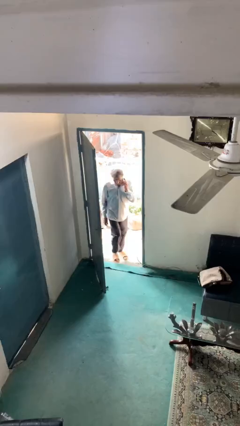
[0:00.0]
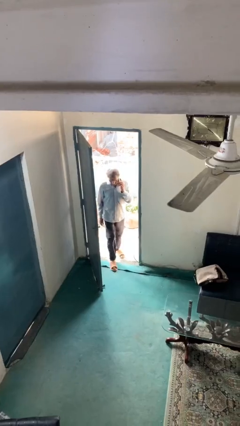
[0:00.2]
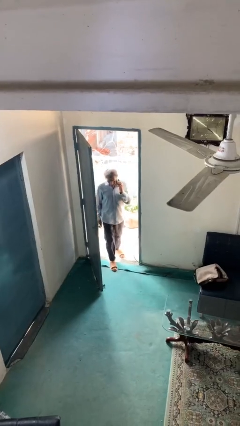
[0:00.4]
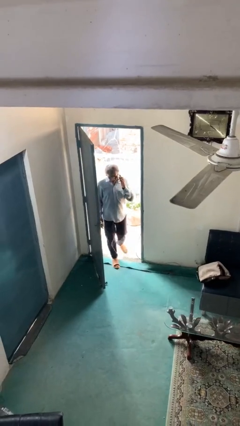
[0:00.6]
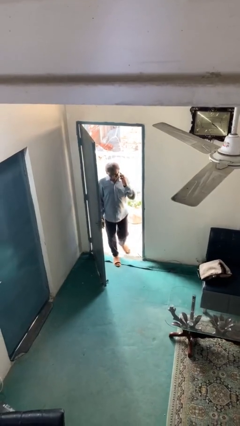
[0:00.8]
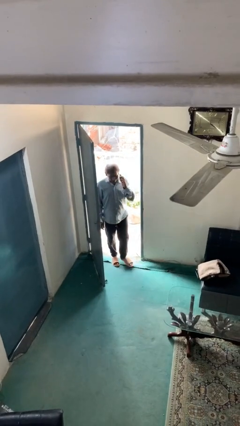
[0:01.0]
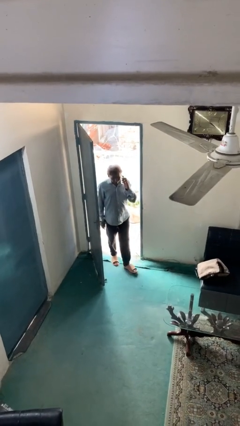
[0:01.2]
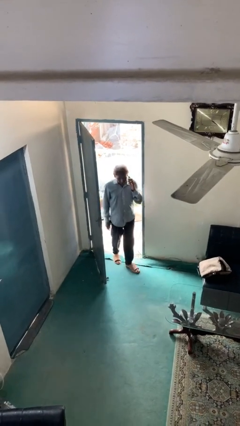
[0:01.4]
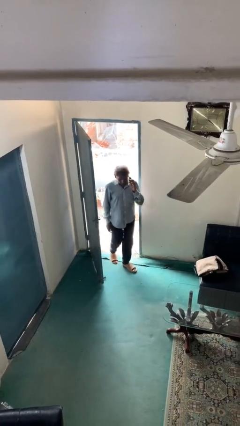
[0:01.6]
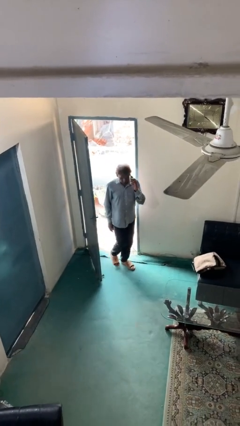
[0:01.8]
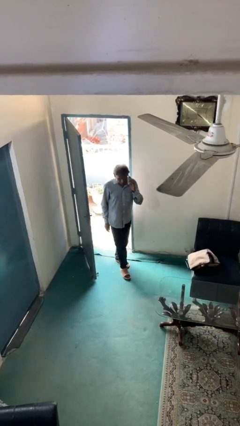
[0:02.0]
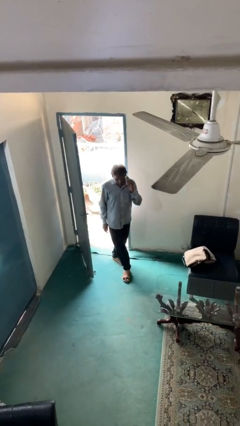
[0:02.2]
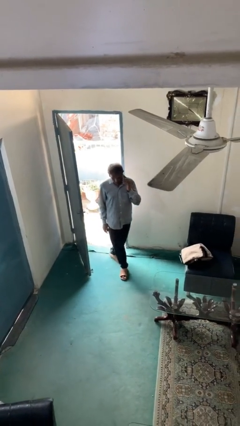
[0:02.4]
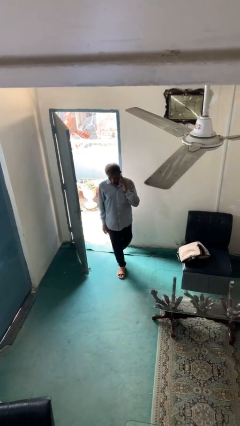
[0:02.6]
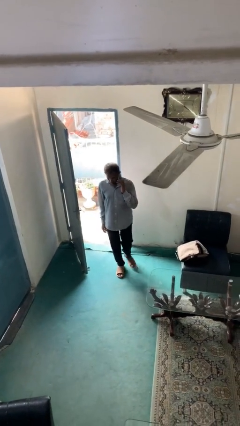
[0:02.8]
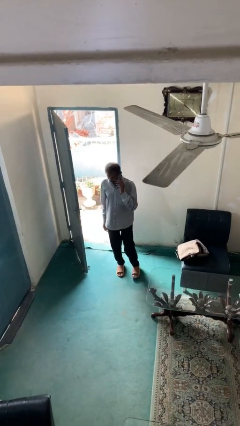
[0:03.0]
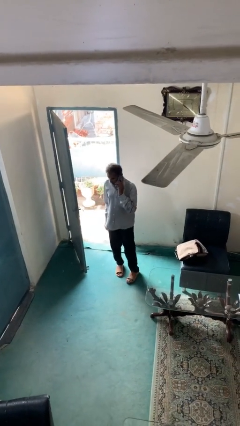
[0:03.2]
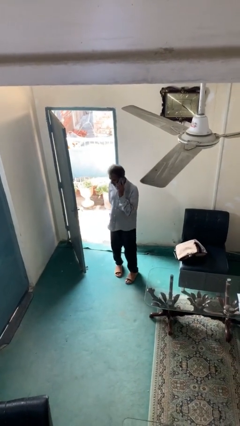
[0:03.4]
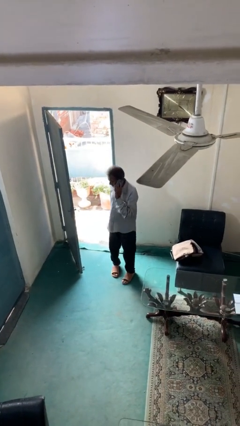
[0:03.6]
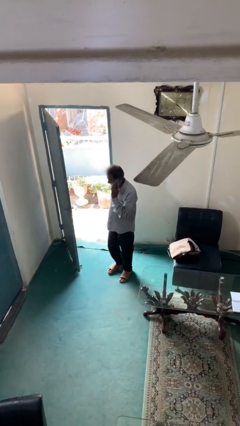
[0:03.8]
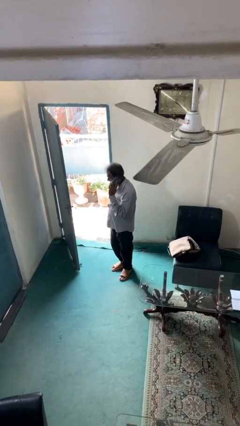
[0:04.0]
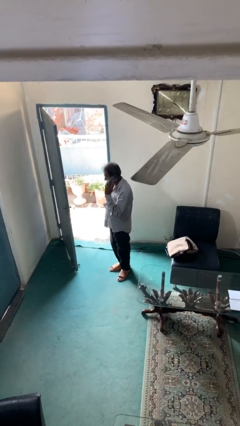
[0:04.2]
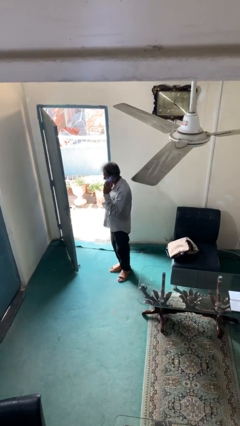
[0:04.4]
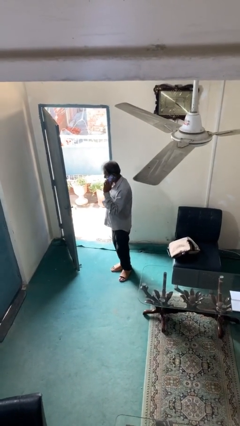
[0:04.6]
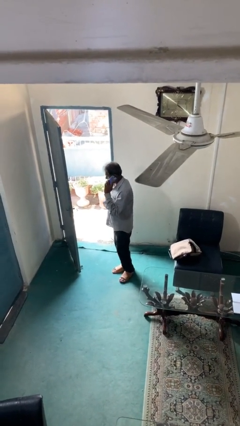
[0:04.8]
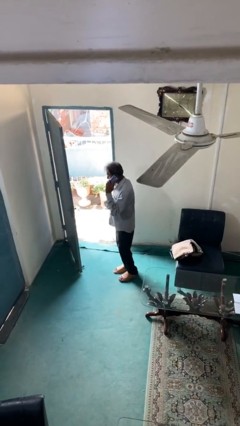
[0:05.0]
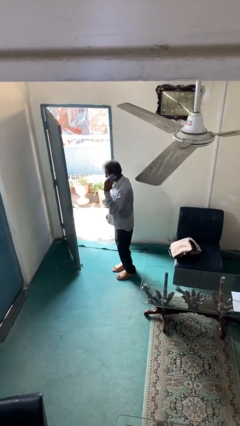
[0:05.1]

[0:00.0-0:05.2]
person enters scene through structure

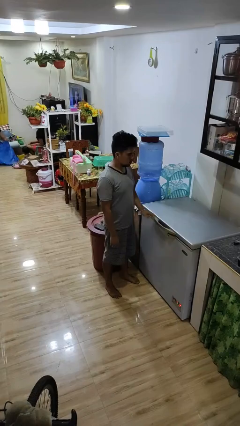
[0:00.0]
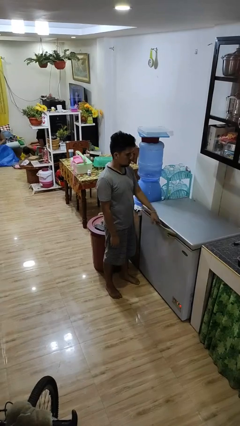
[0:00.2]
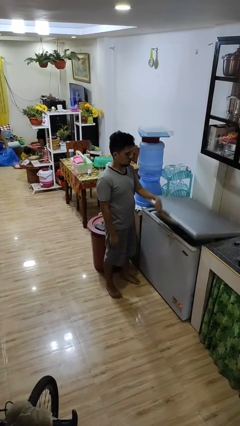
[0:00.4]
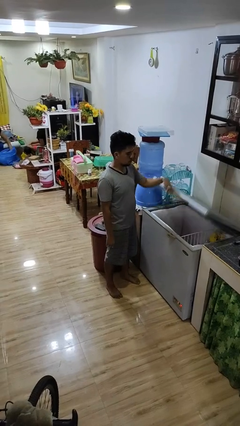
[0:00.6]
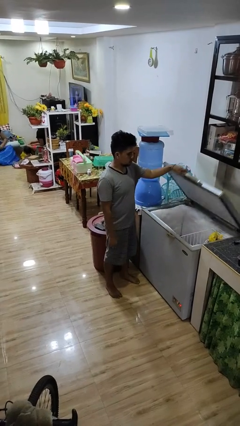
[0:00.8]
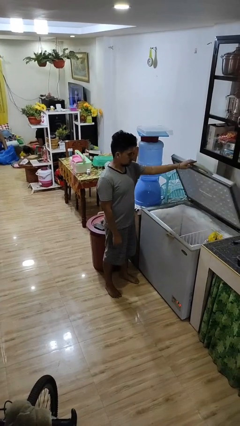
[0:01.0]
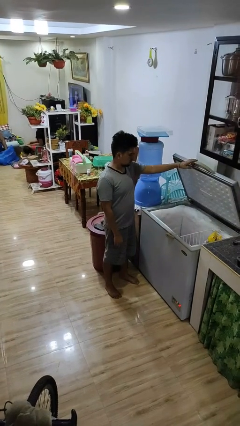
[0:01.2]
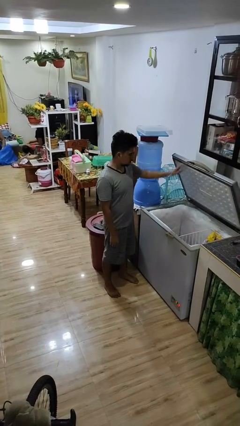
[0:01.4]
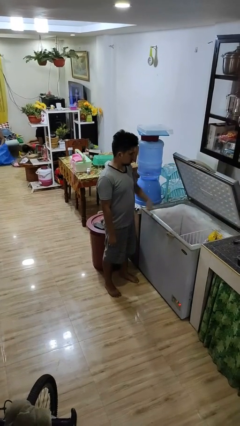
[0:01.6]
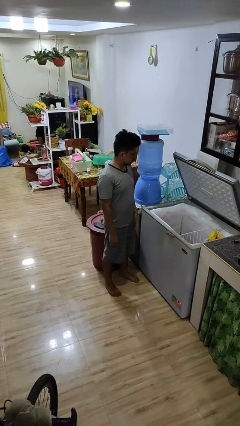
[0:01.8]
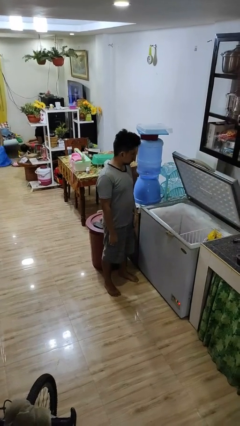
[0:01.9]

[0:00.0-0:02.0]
person opens refrigerator

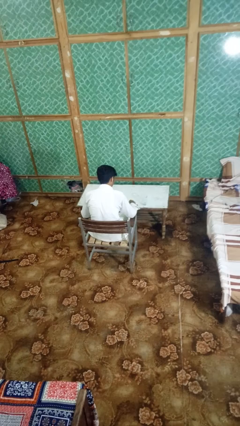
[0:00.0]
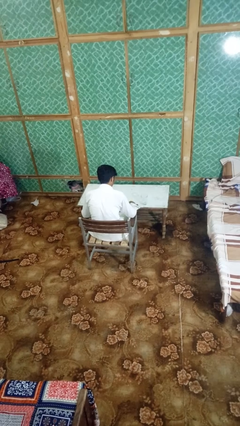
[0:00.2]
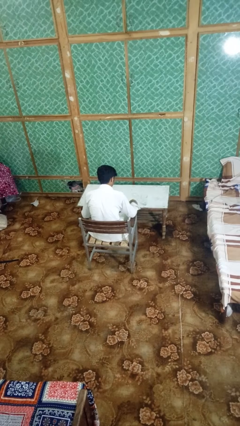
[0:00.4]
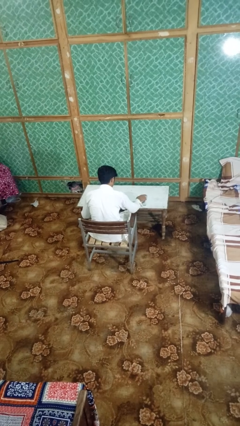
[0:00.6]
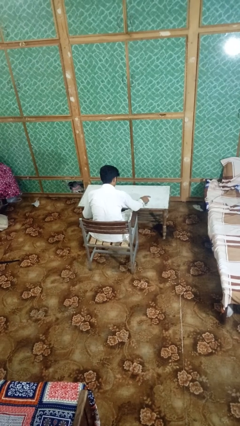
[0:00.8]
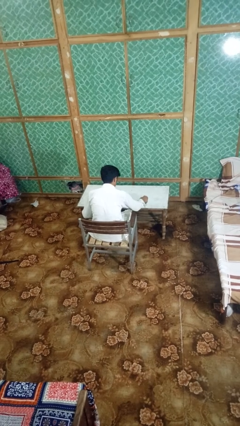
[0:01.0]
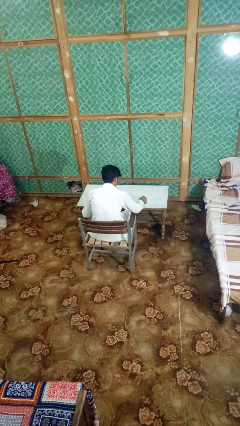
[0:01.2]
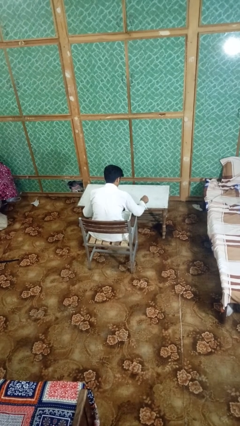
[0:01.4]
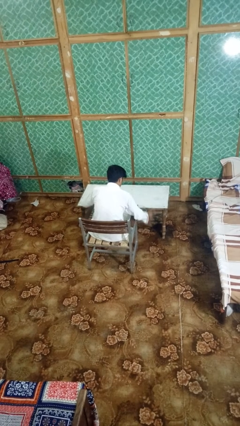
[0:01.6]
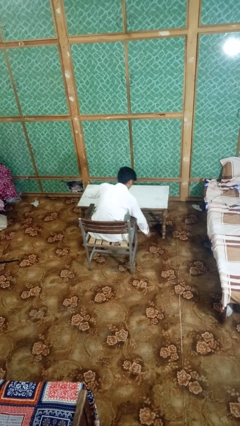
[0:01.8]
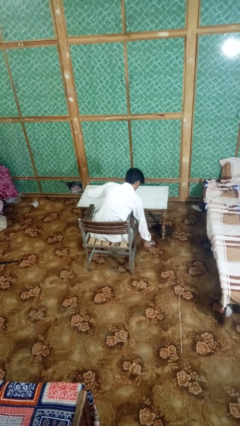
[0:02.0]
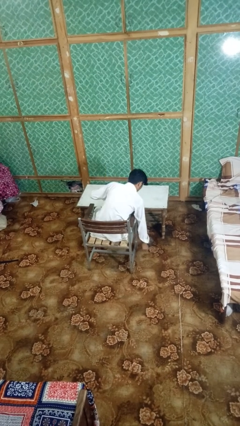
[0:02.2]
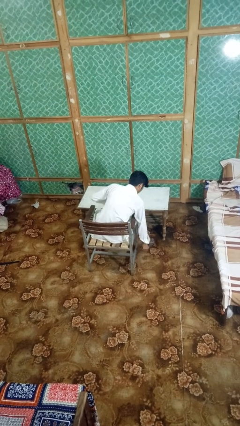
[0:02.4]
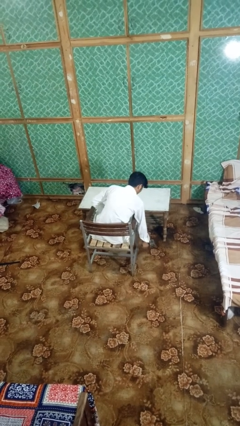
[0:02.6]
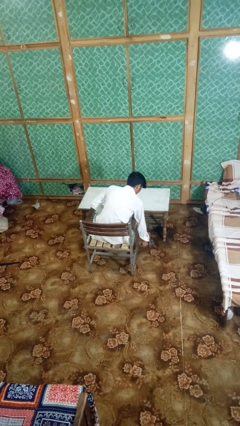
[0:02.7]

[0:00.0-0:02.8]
person knocks over glass

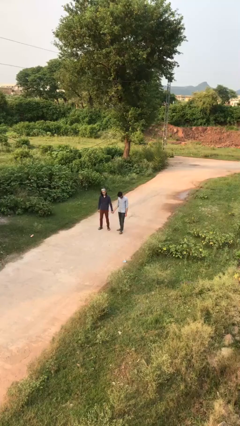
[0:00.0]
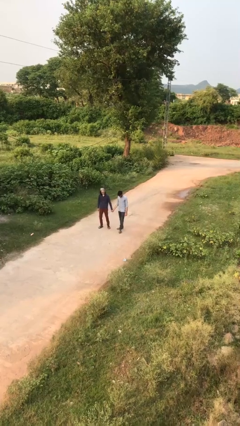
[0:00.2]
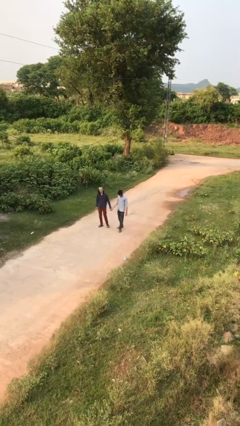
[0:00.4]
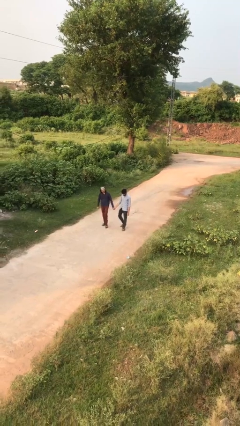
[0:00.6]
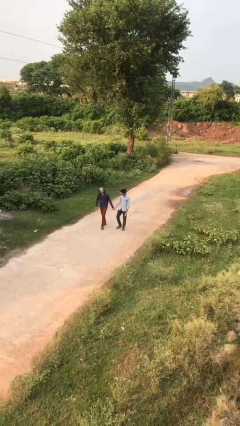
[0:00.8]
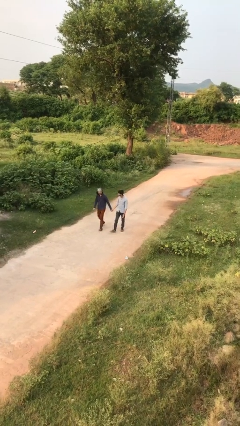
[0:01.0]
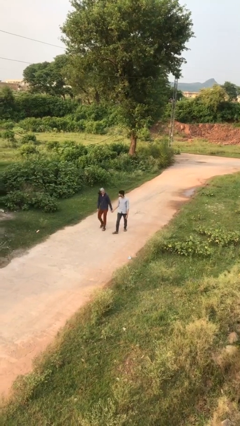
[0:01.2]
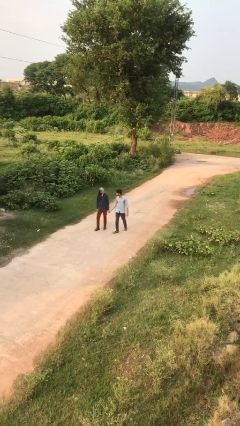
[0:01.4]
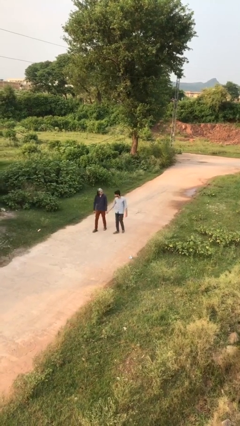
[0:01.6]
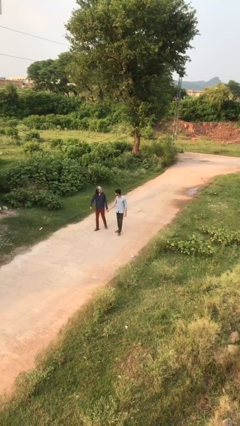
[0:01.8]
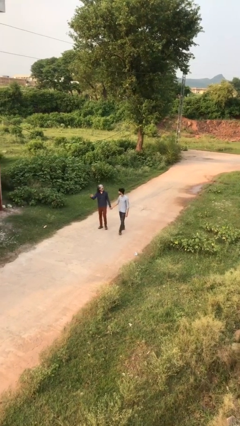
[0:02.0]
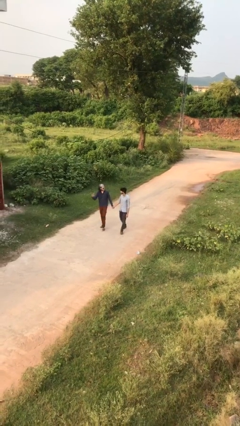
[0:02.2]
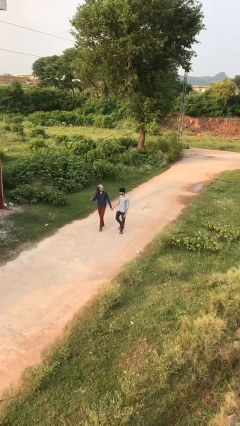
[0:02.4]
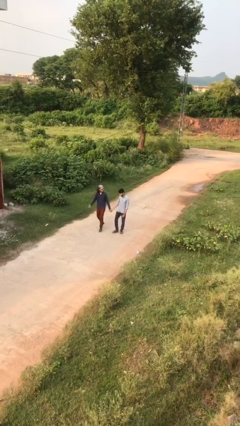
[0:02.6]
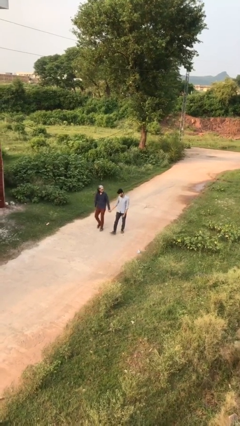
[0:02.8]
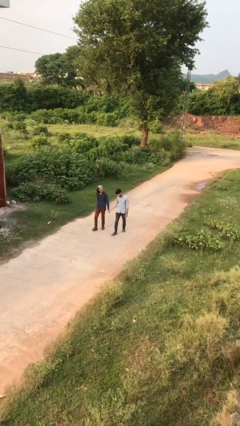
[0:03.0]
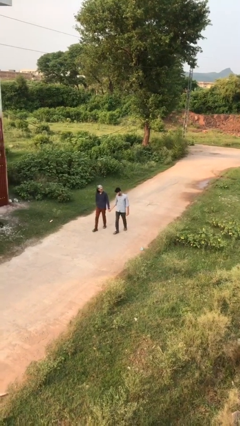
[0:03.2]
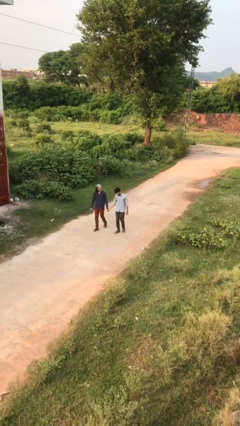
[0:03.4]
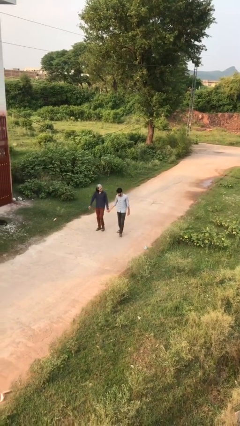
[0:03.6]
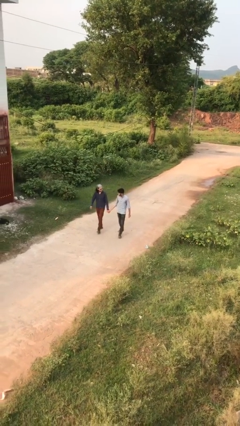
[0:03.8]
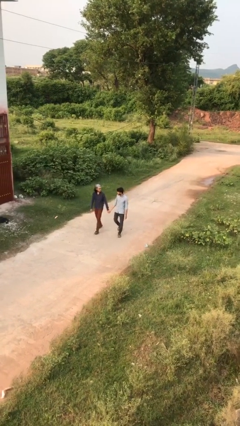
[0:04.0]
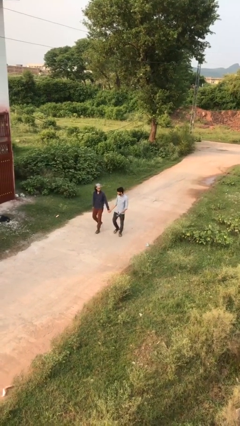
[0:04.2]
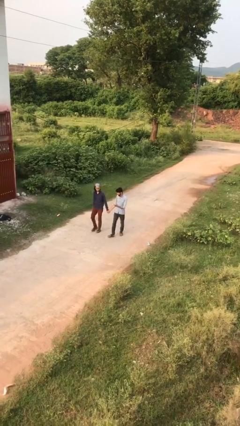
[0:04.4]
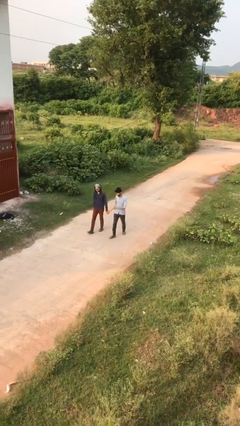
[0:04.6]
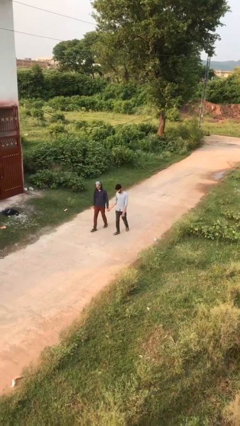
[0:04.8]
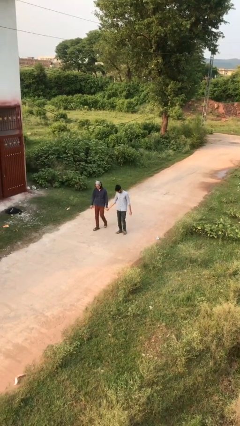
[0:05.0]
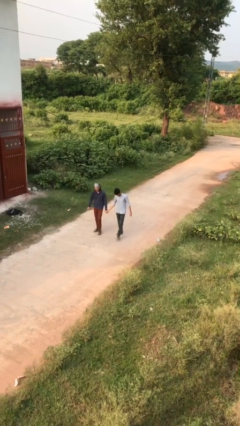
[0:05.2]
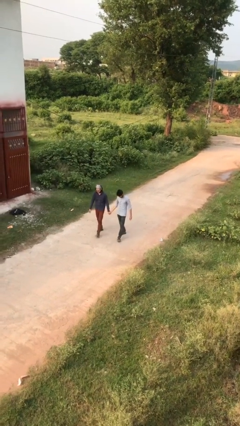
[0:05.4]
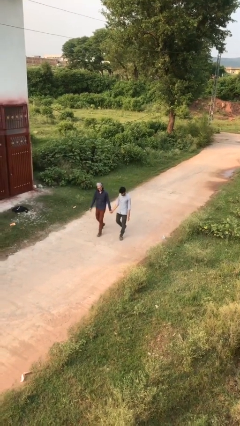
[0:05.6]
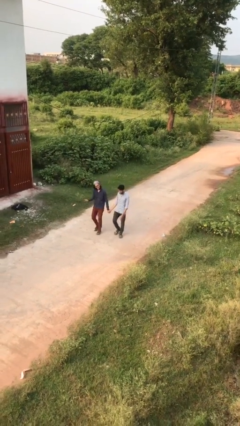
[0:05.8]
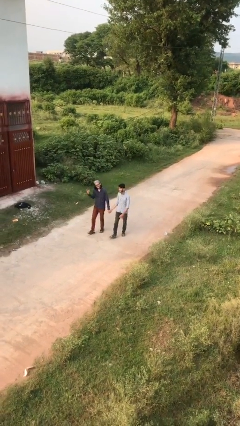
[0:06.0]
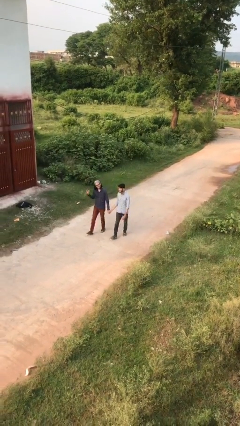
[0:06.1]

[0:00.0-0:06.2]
person holds hand

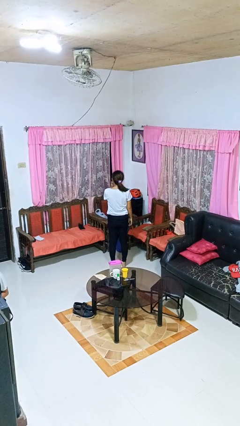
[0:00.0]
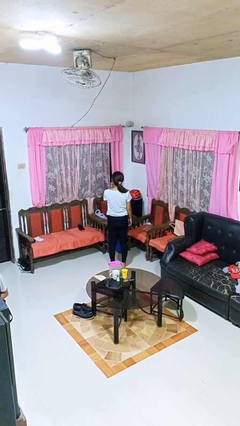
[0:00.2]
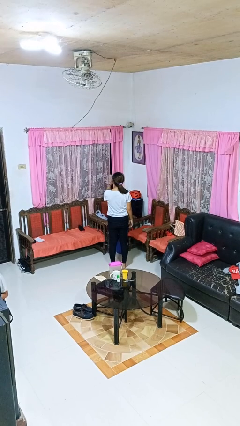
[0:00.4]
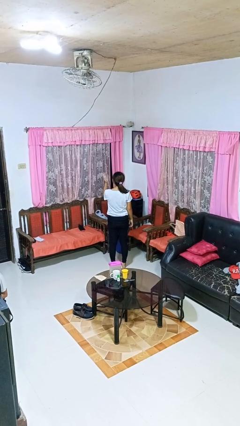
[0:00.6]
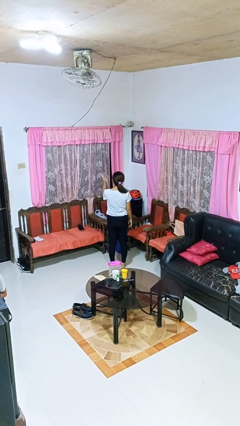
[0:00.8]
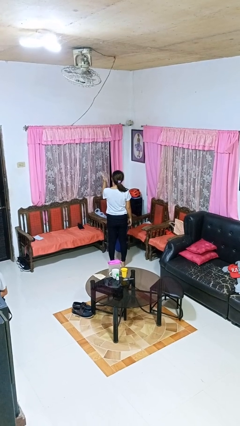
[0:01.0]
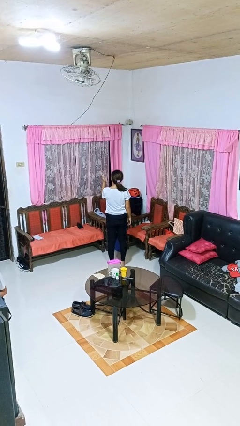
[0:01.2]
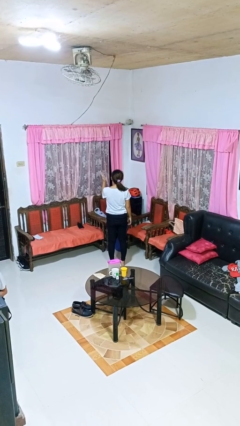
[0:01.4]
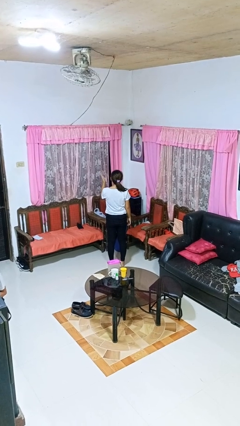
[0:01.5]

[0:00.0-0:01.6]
person gestures blow kiss
